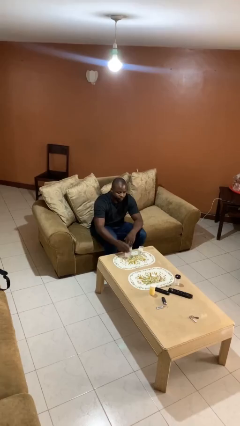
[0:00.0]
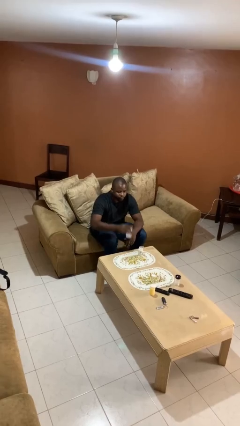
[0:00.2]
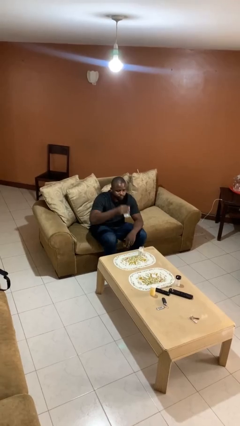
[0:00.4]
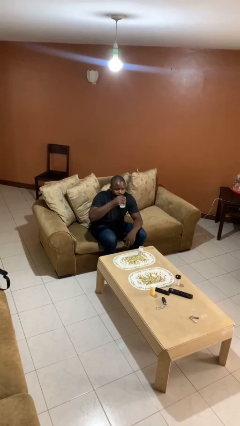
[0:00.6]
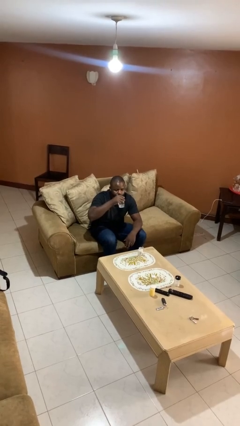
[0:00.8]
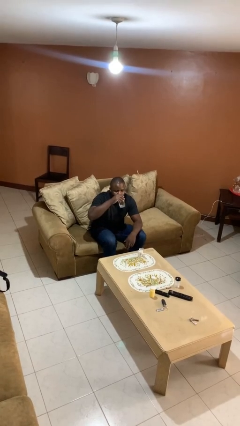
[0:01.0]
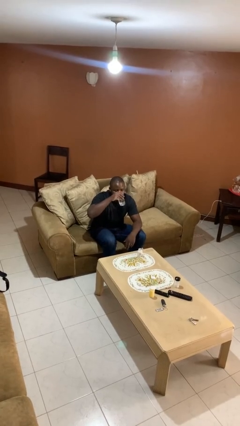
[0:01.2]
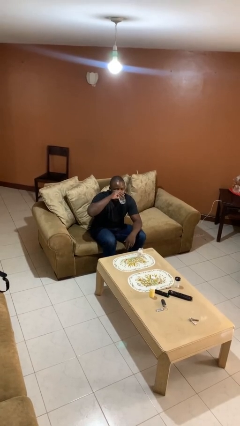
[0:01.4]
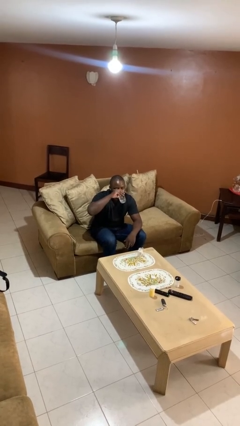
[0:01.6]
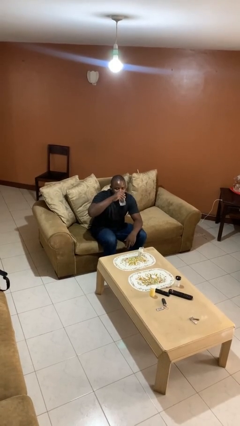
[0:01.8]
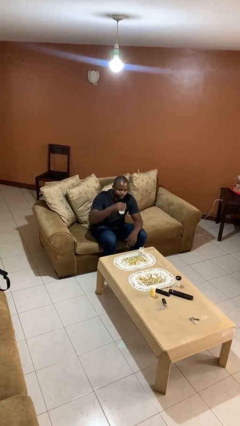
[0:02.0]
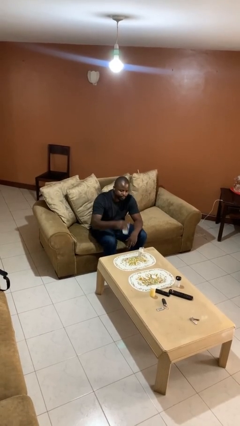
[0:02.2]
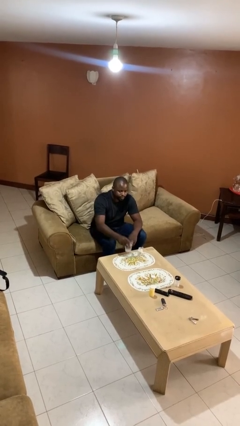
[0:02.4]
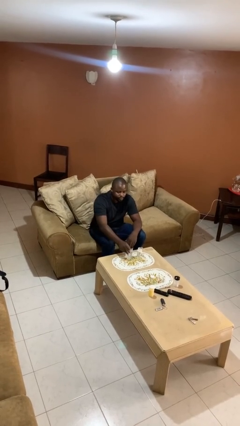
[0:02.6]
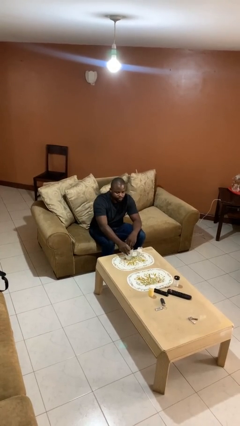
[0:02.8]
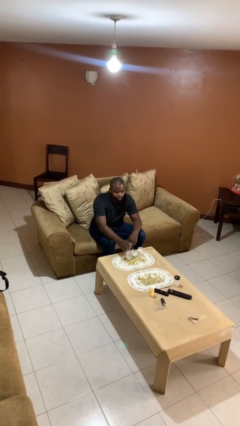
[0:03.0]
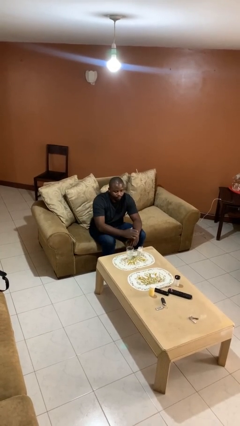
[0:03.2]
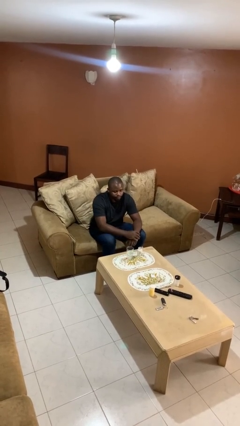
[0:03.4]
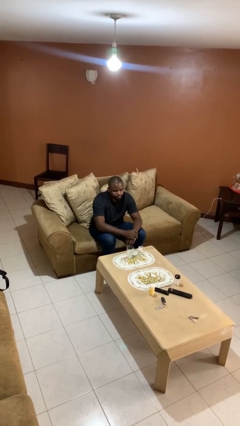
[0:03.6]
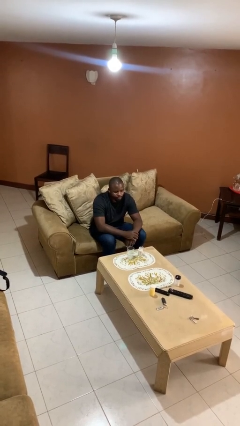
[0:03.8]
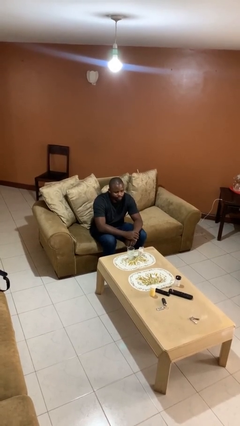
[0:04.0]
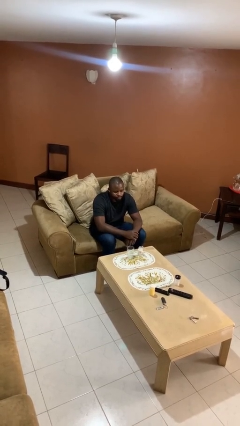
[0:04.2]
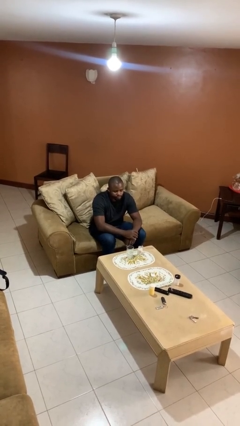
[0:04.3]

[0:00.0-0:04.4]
person drinks from cup

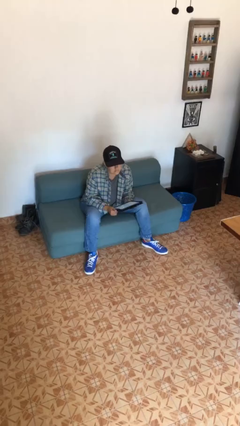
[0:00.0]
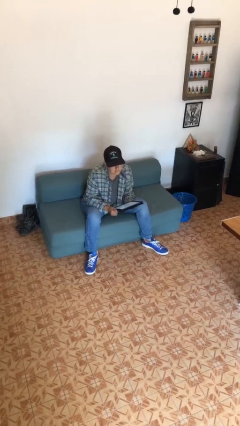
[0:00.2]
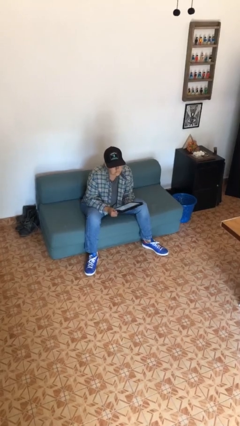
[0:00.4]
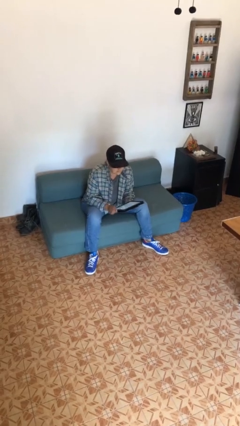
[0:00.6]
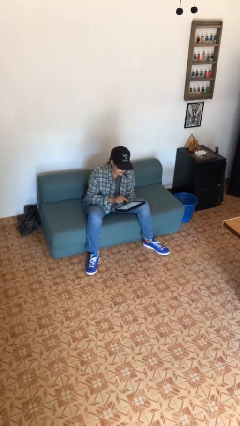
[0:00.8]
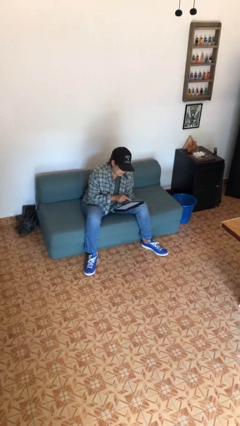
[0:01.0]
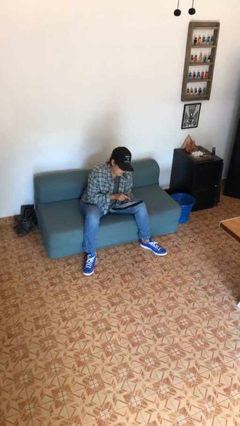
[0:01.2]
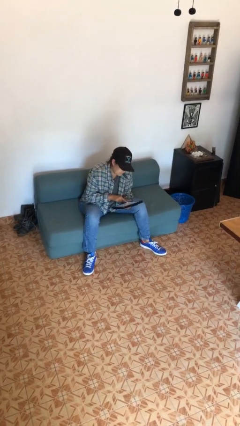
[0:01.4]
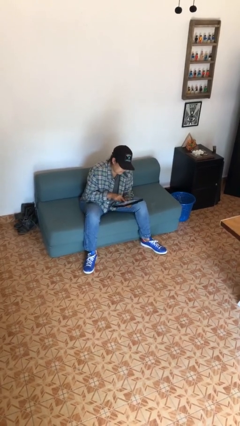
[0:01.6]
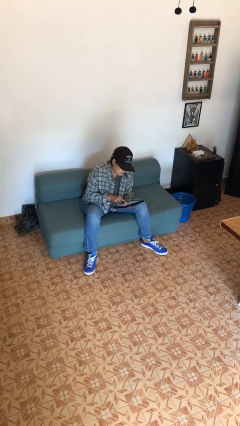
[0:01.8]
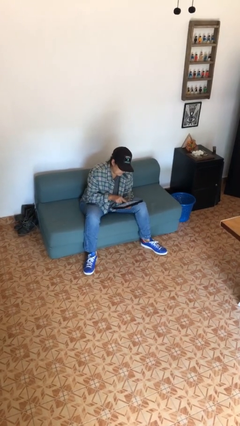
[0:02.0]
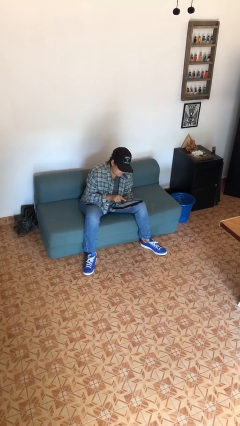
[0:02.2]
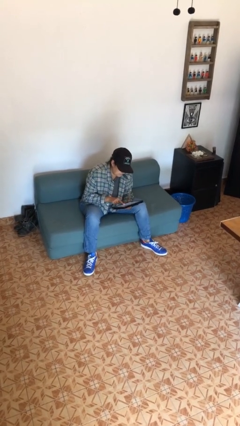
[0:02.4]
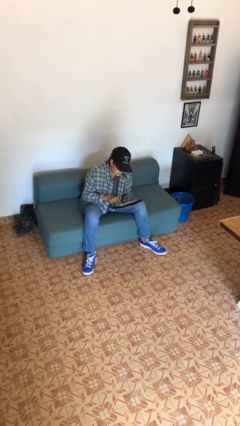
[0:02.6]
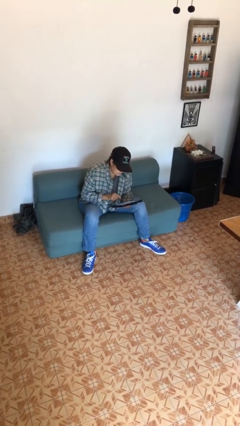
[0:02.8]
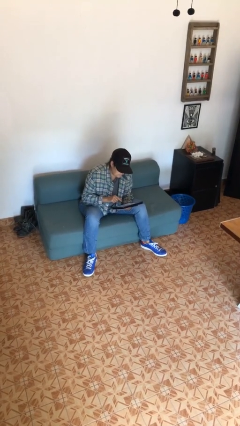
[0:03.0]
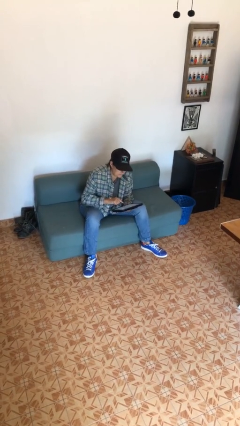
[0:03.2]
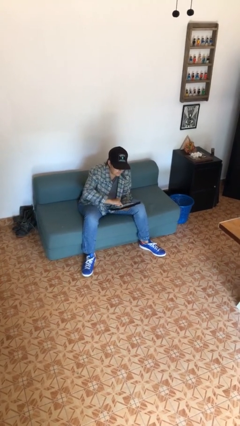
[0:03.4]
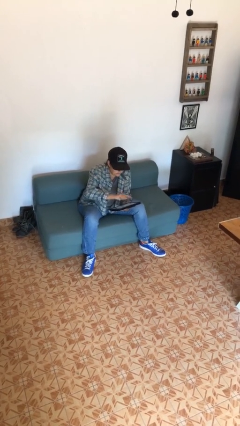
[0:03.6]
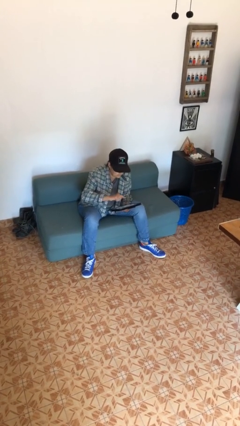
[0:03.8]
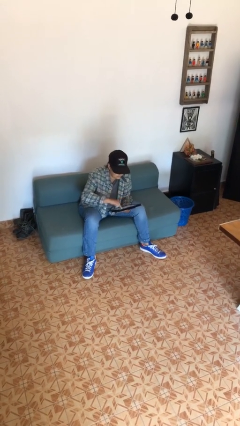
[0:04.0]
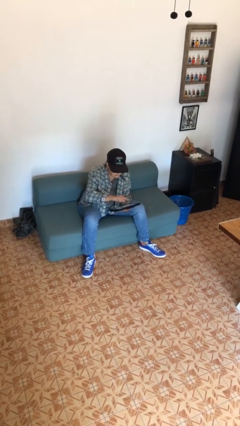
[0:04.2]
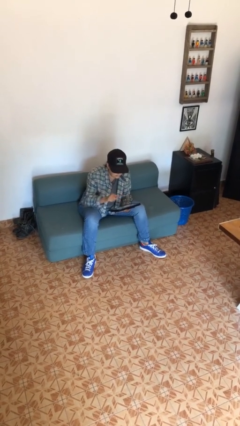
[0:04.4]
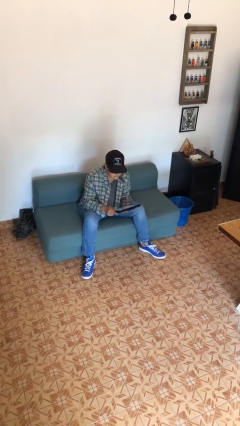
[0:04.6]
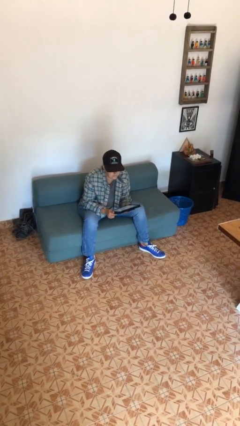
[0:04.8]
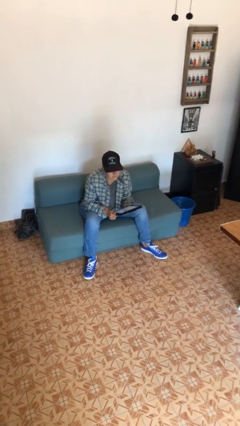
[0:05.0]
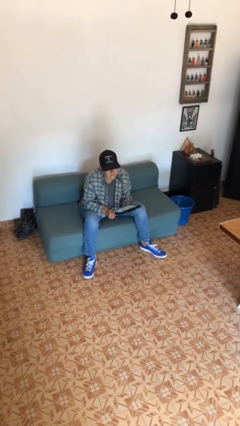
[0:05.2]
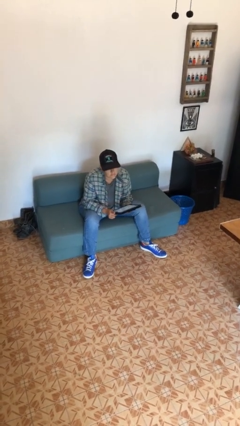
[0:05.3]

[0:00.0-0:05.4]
person interacts with tablet

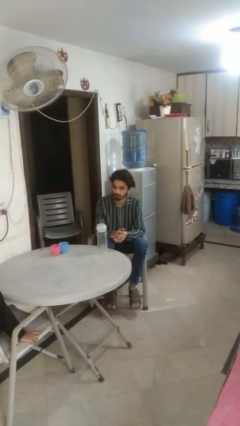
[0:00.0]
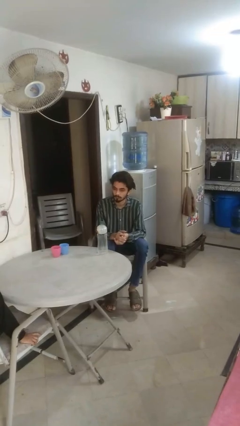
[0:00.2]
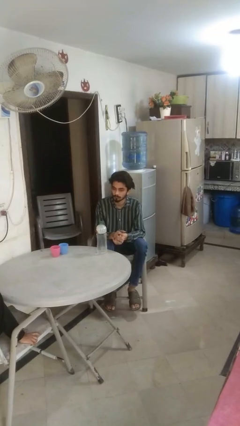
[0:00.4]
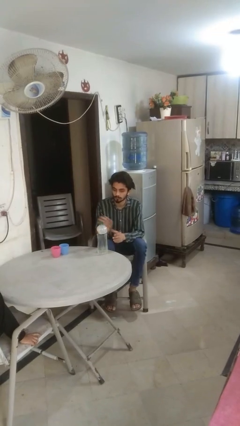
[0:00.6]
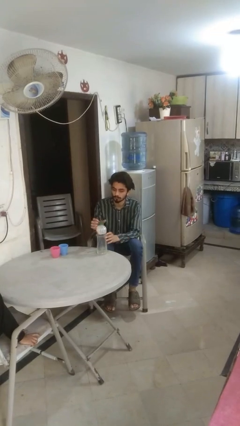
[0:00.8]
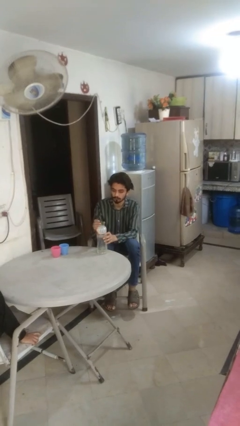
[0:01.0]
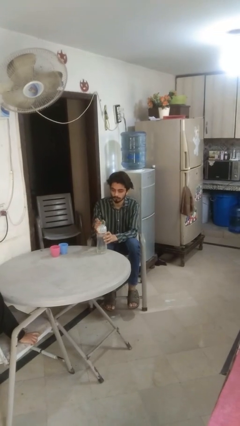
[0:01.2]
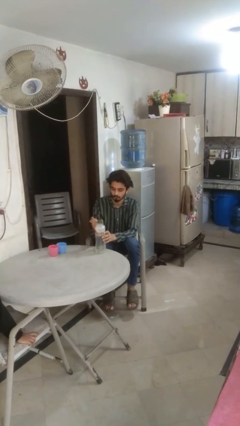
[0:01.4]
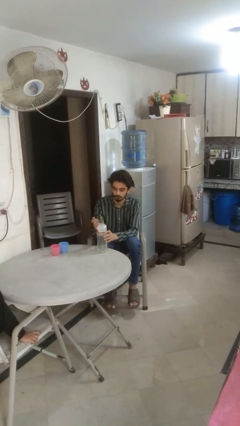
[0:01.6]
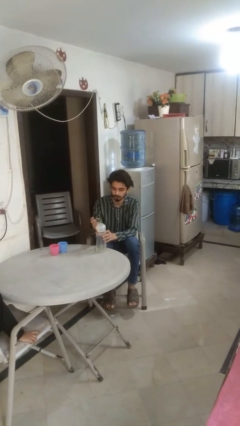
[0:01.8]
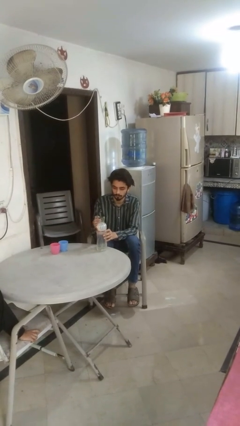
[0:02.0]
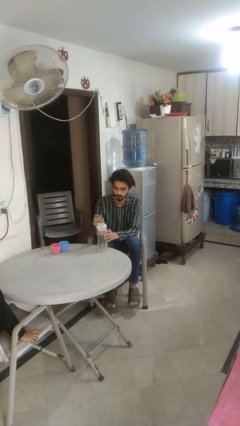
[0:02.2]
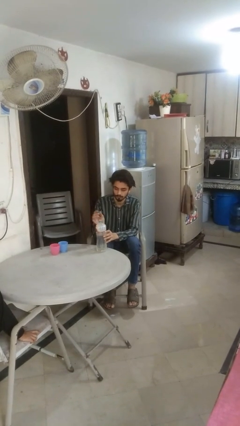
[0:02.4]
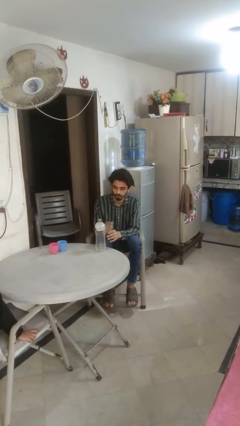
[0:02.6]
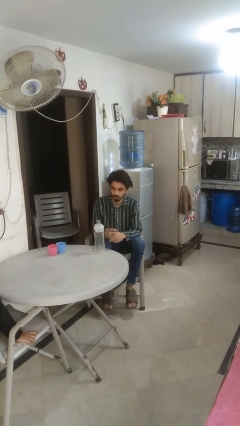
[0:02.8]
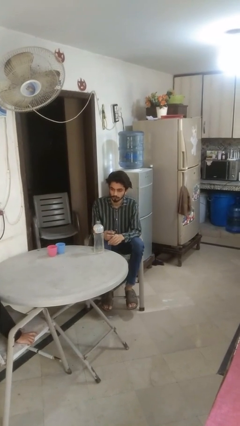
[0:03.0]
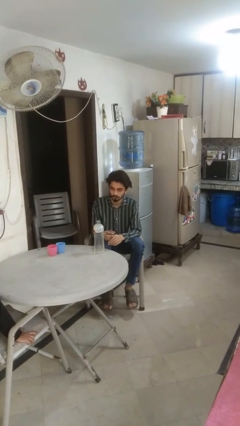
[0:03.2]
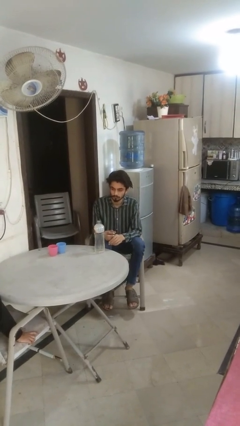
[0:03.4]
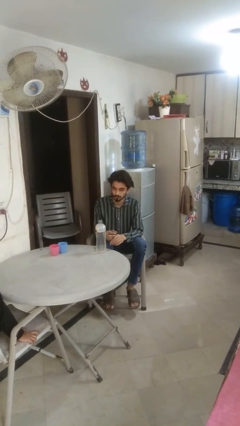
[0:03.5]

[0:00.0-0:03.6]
person unscrews lid from bottle

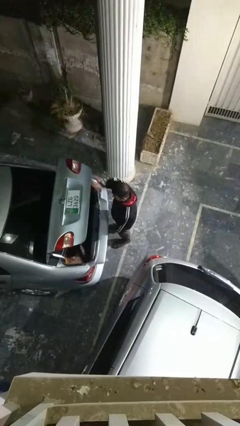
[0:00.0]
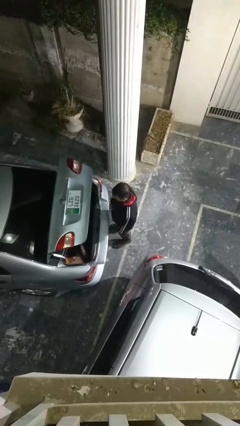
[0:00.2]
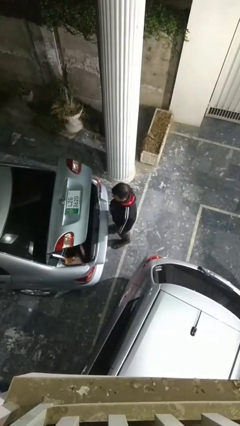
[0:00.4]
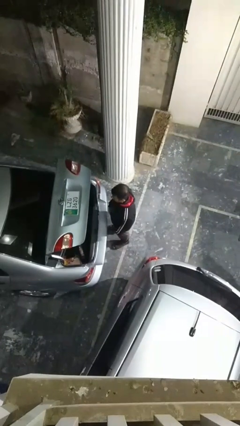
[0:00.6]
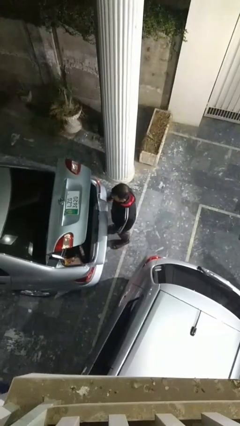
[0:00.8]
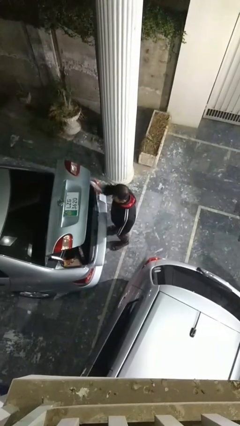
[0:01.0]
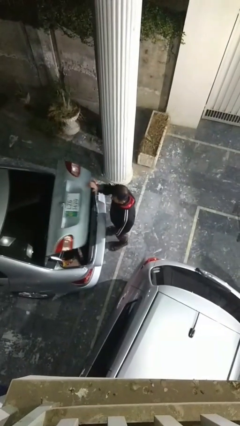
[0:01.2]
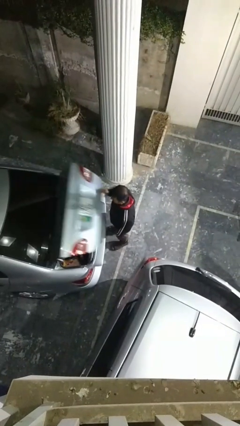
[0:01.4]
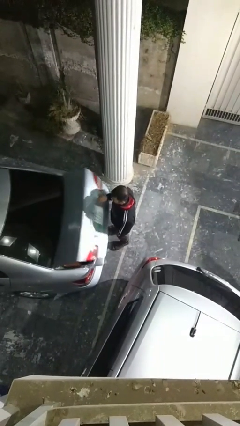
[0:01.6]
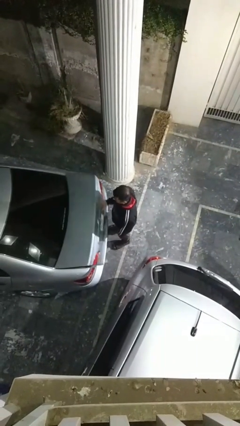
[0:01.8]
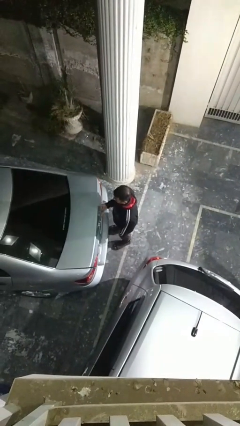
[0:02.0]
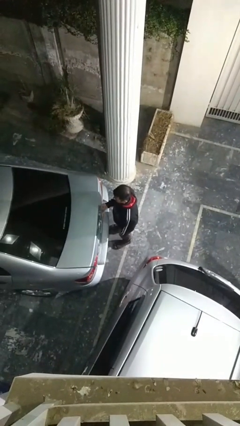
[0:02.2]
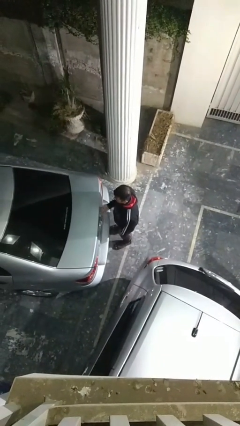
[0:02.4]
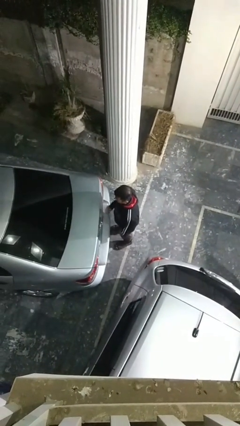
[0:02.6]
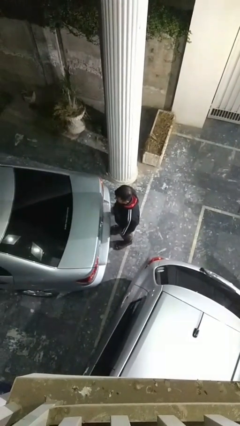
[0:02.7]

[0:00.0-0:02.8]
person closes car trunk

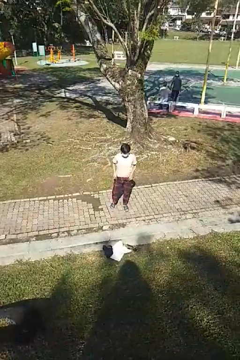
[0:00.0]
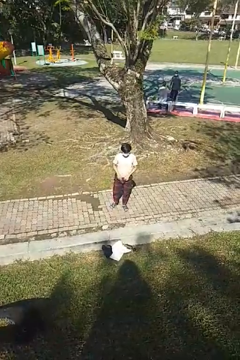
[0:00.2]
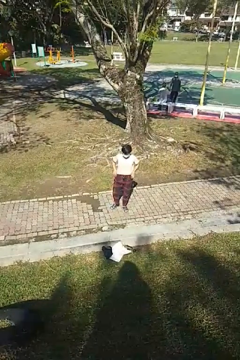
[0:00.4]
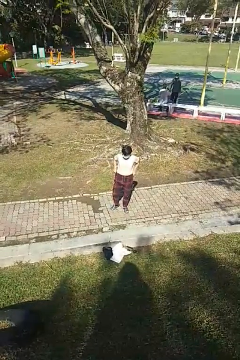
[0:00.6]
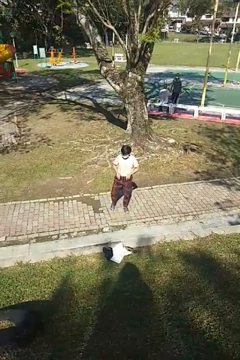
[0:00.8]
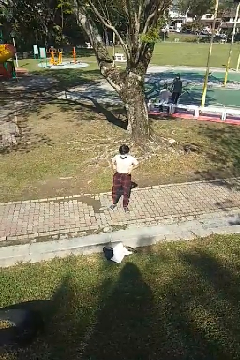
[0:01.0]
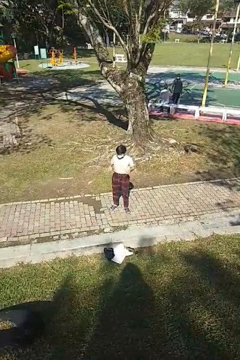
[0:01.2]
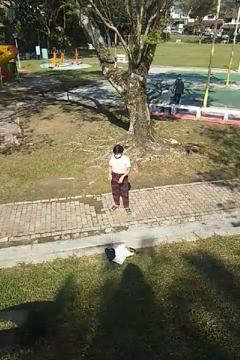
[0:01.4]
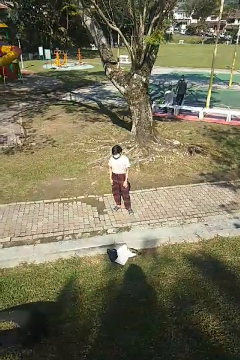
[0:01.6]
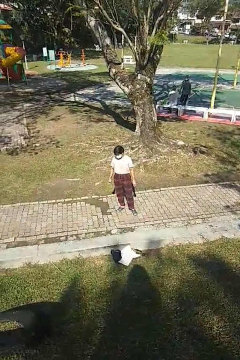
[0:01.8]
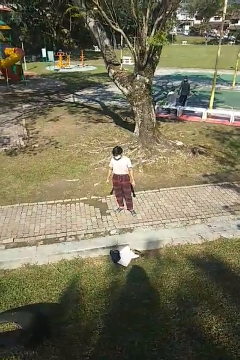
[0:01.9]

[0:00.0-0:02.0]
person hikes up pants
